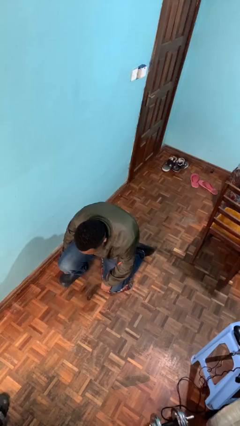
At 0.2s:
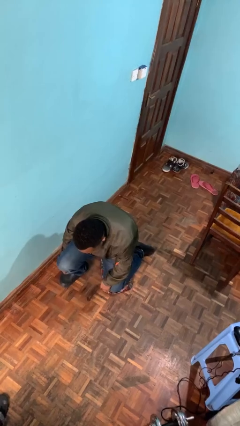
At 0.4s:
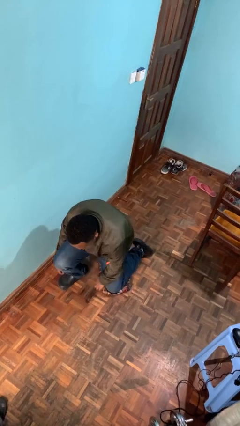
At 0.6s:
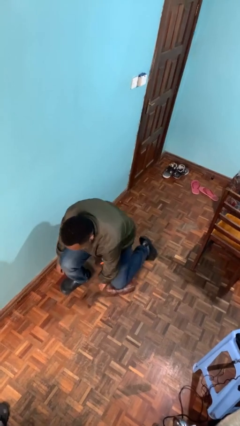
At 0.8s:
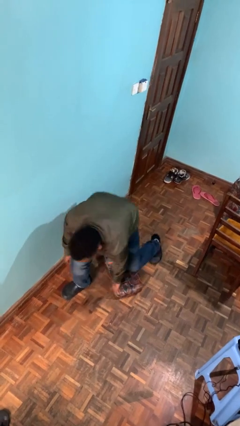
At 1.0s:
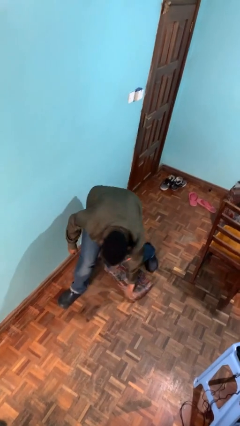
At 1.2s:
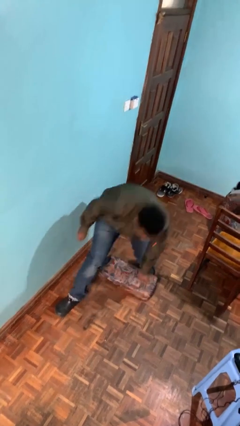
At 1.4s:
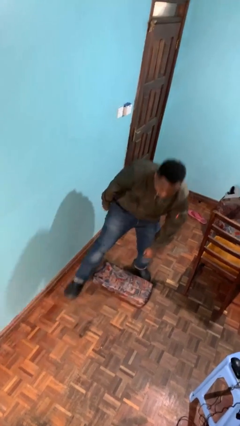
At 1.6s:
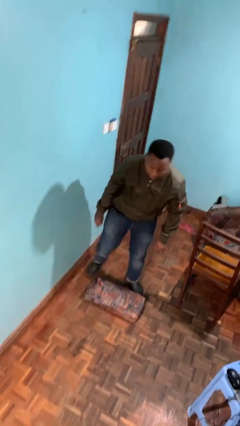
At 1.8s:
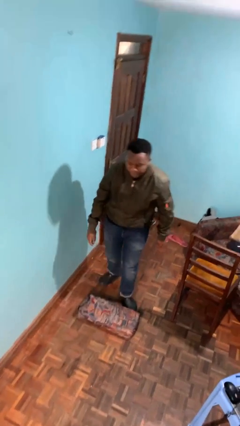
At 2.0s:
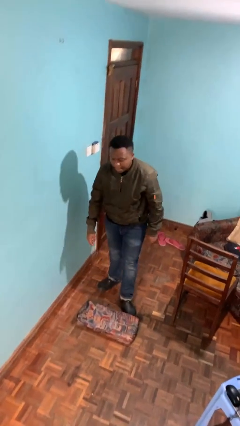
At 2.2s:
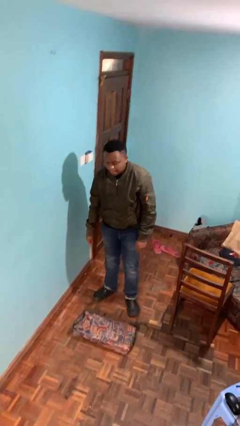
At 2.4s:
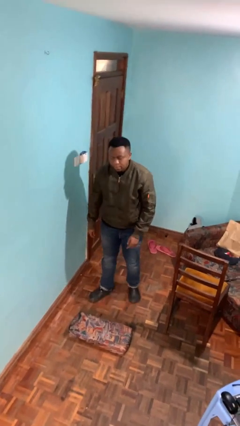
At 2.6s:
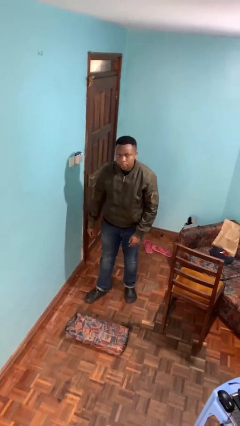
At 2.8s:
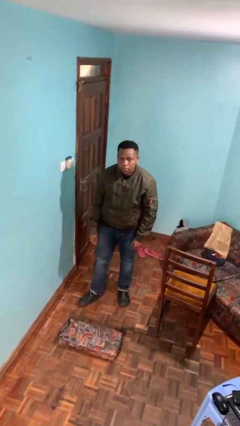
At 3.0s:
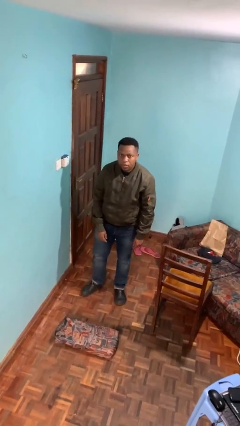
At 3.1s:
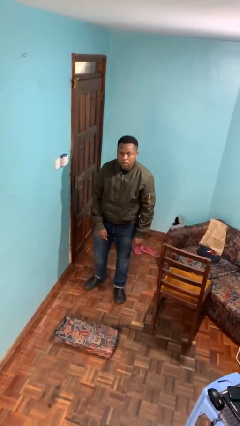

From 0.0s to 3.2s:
person stands up from floor

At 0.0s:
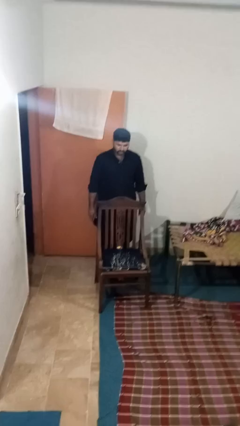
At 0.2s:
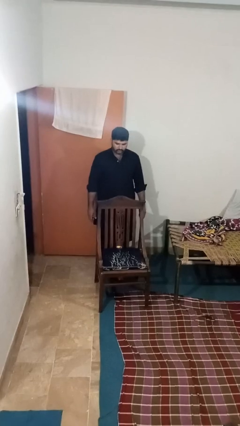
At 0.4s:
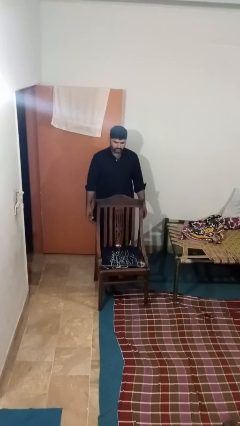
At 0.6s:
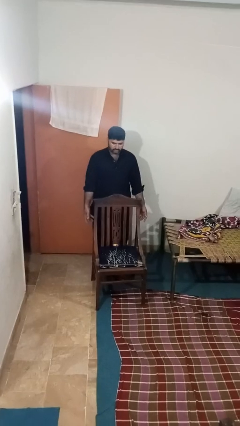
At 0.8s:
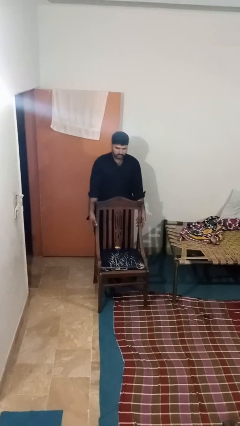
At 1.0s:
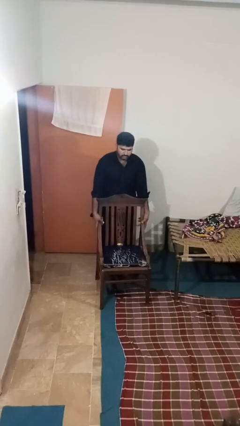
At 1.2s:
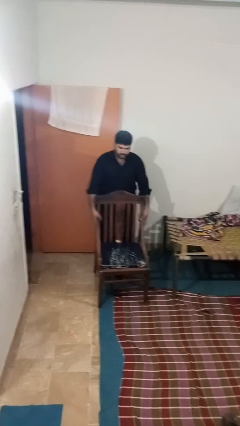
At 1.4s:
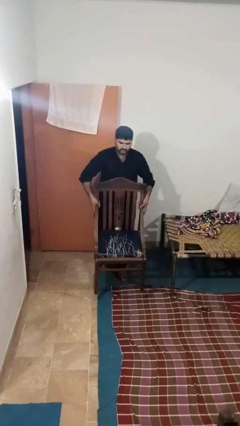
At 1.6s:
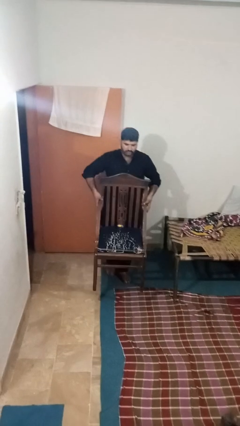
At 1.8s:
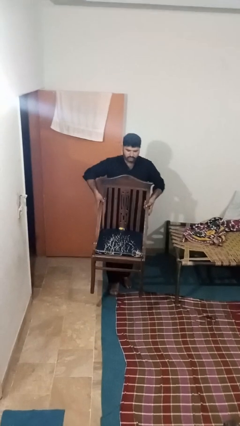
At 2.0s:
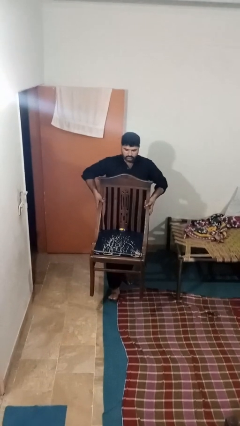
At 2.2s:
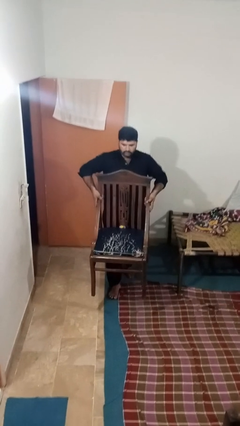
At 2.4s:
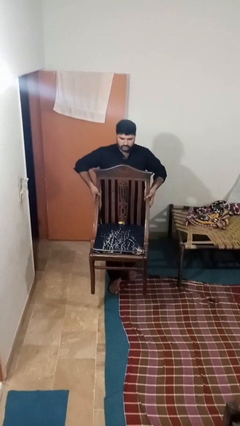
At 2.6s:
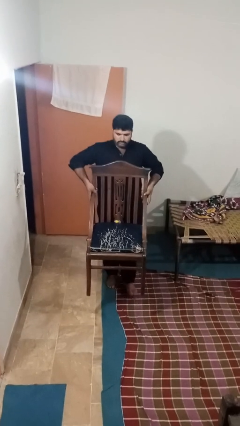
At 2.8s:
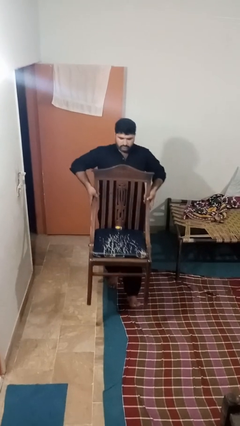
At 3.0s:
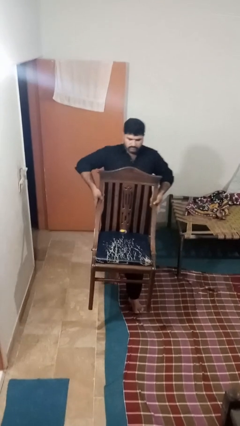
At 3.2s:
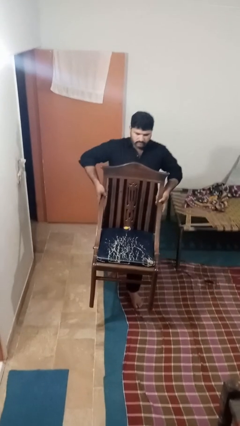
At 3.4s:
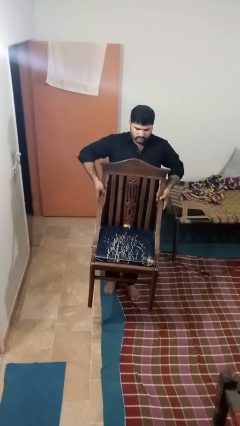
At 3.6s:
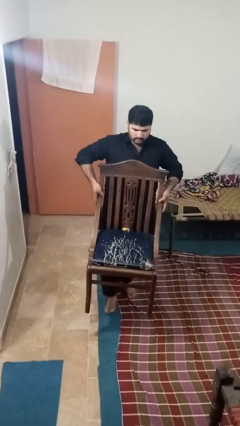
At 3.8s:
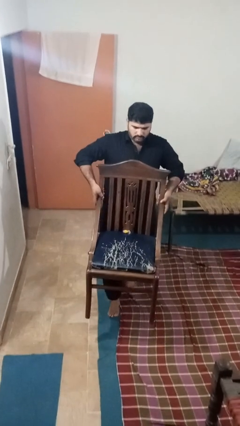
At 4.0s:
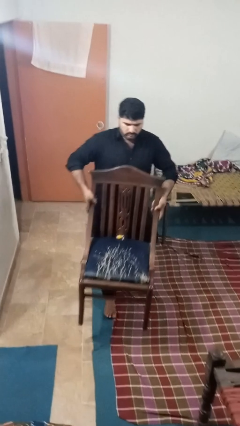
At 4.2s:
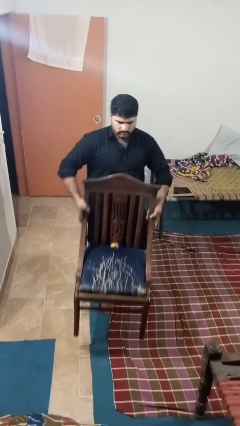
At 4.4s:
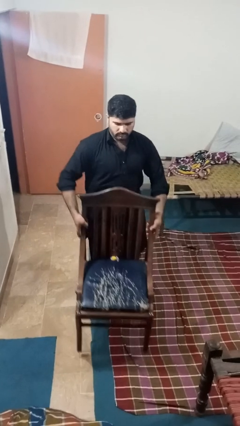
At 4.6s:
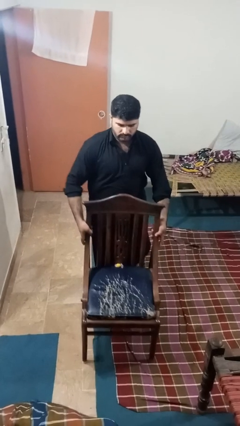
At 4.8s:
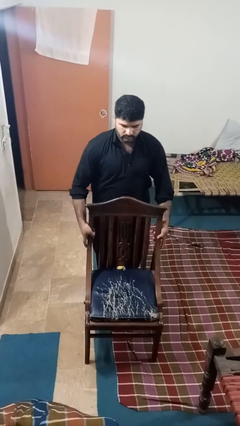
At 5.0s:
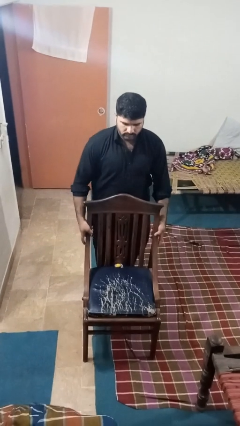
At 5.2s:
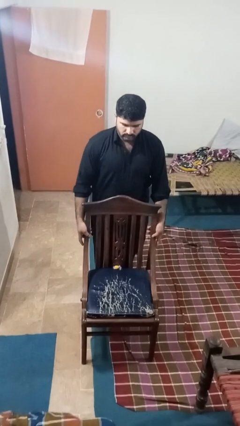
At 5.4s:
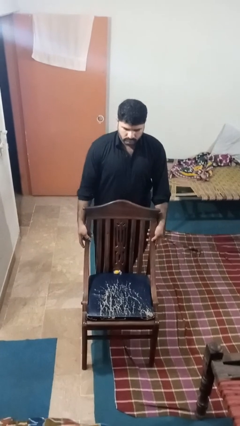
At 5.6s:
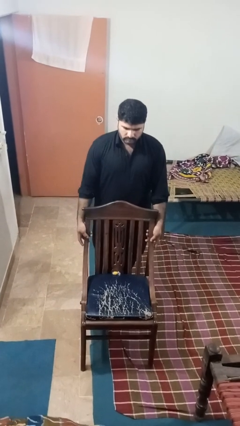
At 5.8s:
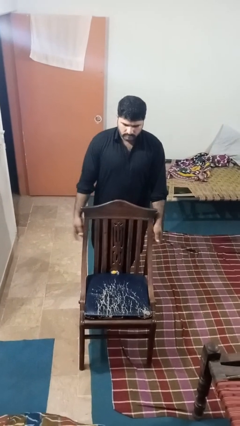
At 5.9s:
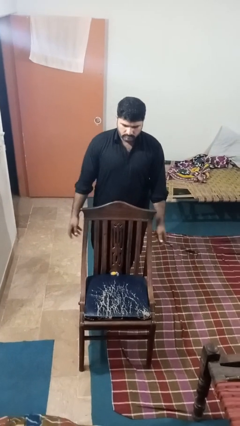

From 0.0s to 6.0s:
person carries furniture

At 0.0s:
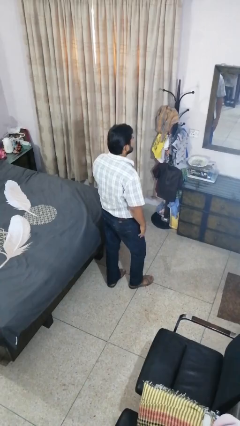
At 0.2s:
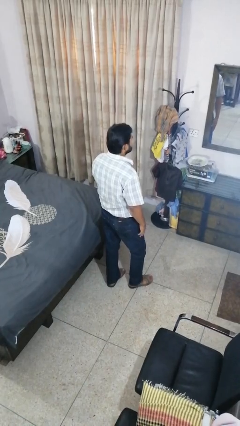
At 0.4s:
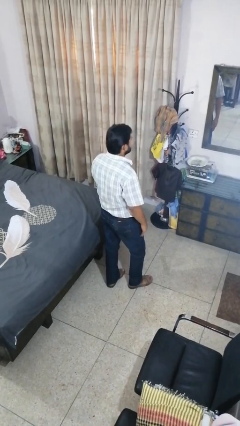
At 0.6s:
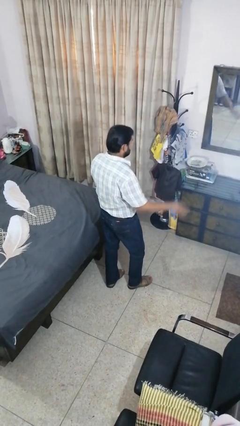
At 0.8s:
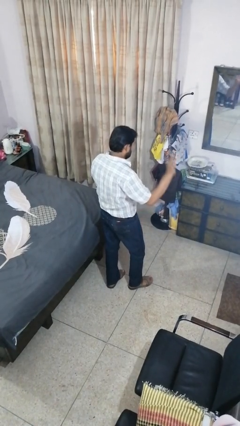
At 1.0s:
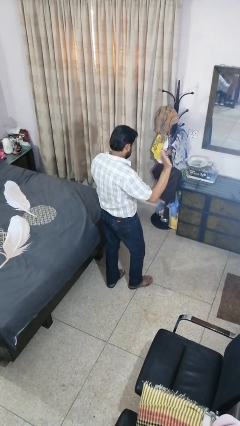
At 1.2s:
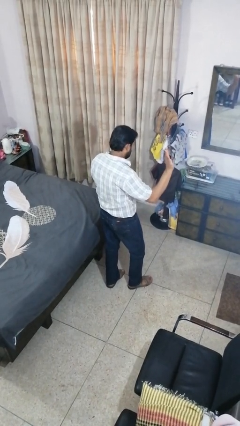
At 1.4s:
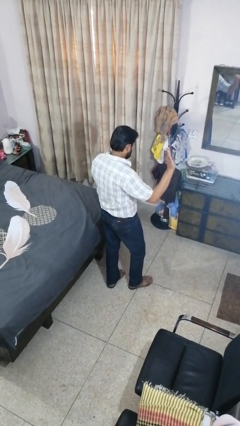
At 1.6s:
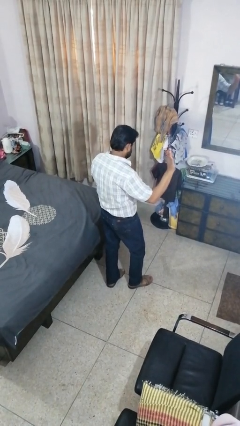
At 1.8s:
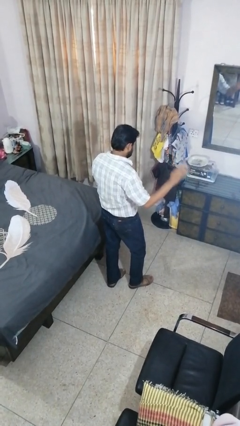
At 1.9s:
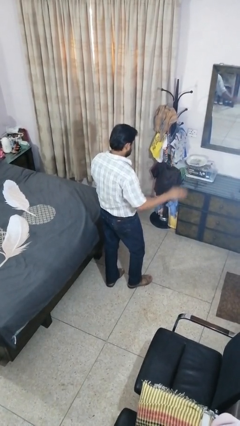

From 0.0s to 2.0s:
person gestures stop

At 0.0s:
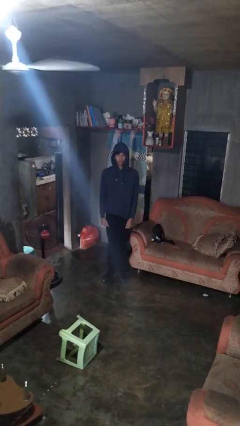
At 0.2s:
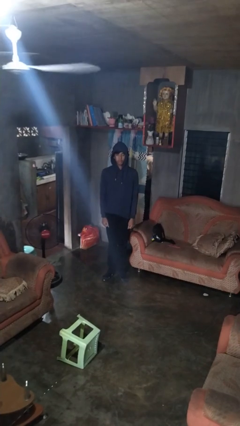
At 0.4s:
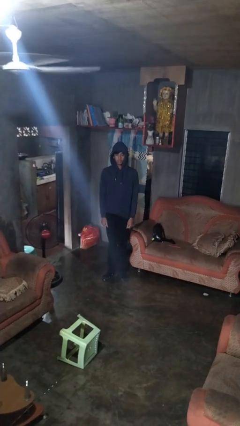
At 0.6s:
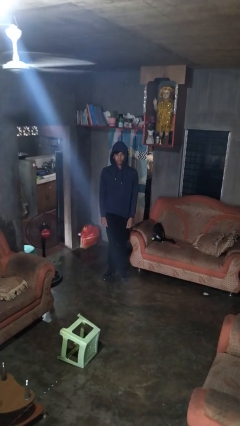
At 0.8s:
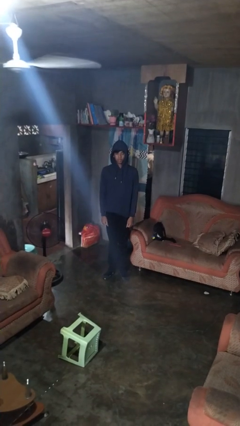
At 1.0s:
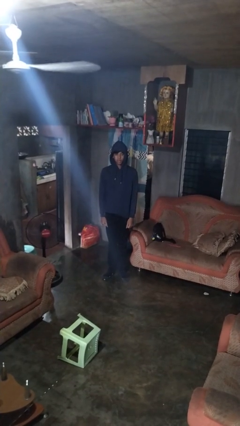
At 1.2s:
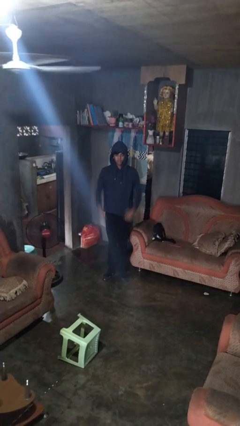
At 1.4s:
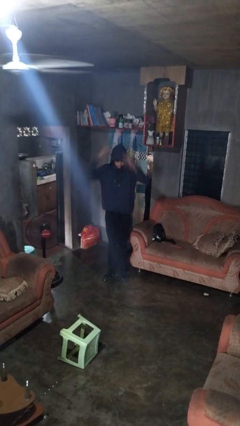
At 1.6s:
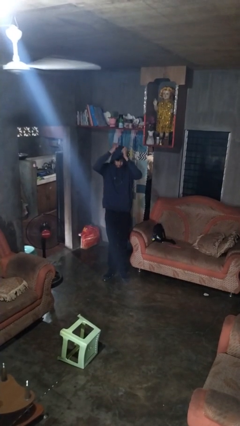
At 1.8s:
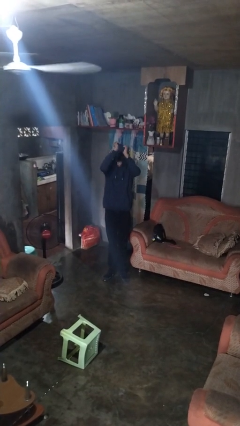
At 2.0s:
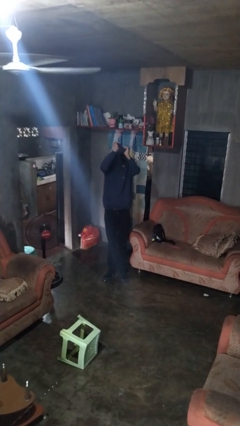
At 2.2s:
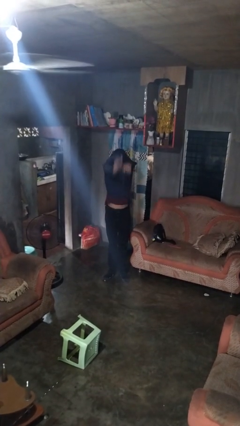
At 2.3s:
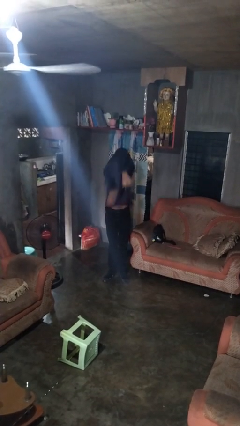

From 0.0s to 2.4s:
person takes off hoodie

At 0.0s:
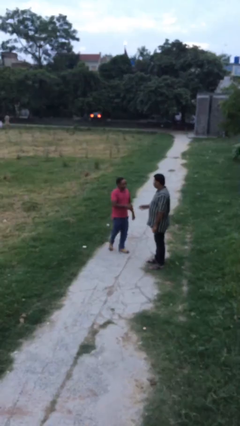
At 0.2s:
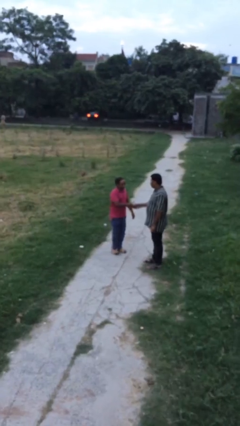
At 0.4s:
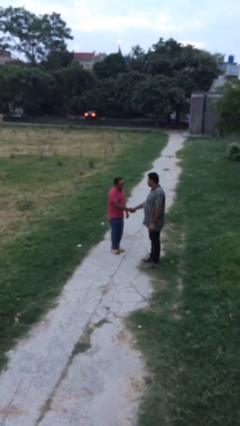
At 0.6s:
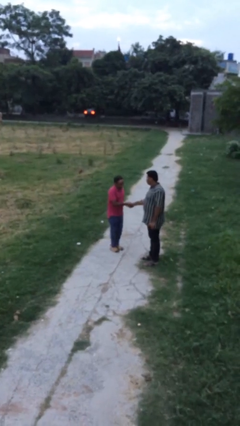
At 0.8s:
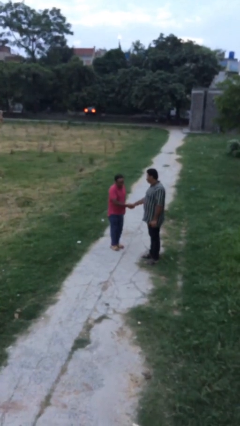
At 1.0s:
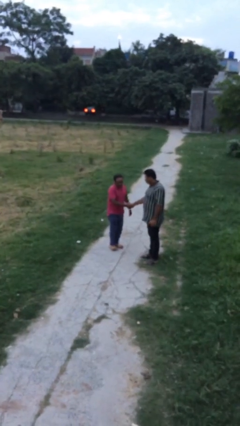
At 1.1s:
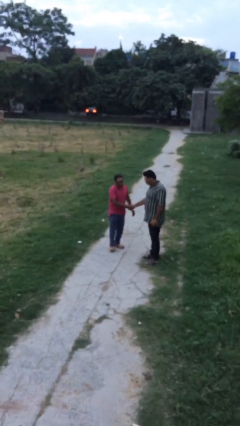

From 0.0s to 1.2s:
person shakes hand

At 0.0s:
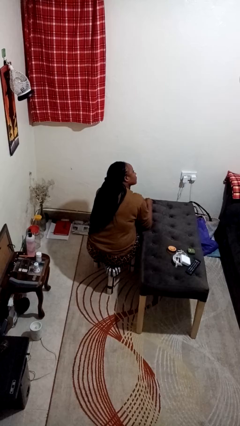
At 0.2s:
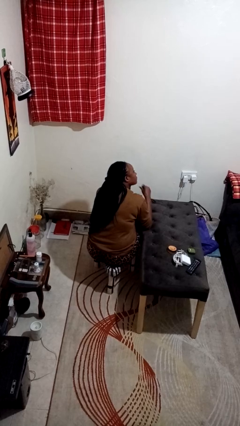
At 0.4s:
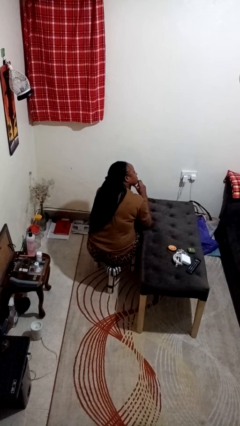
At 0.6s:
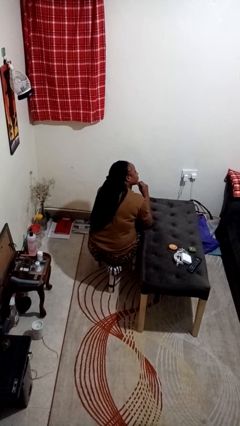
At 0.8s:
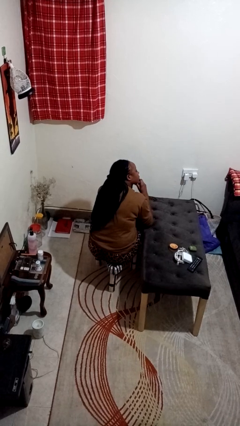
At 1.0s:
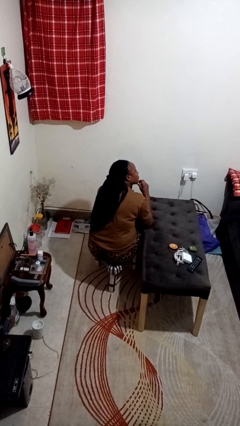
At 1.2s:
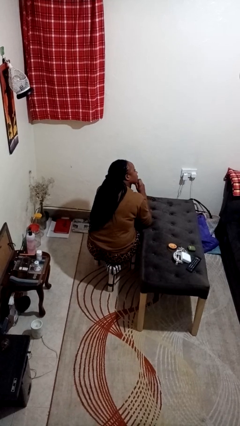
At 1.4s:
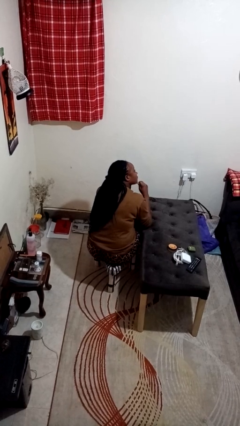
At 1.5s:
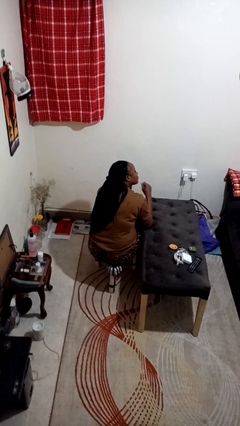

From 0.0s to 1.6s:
person strokes chin

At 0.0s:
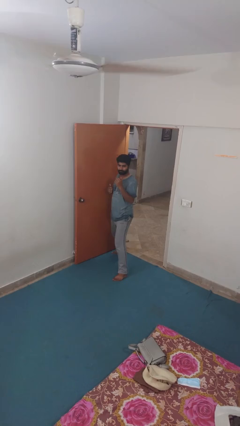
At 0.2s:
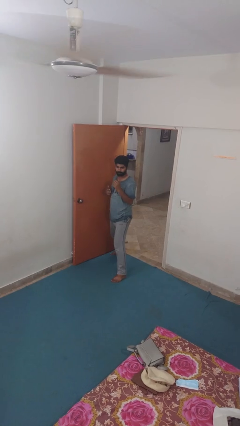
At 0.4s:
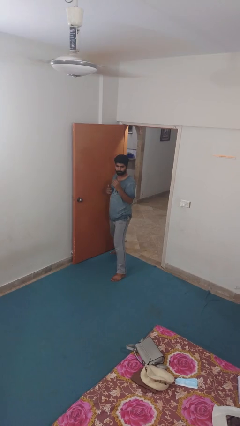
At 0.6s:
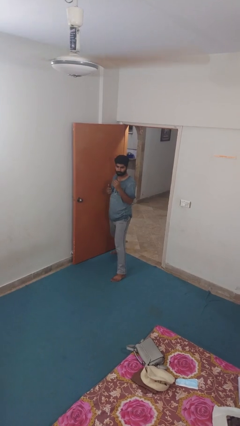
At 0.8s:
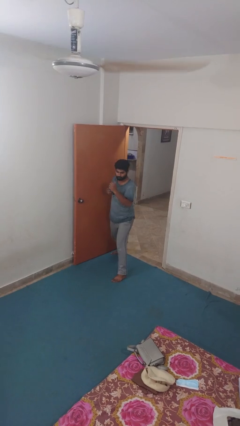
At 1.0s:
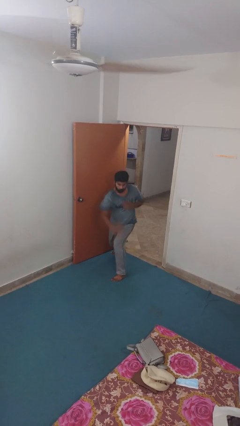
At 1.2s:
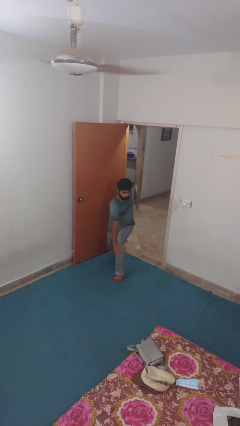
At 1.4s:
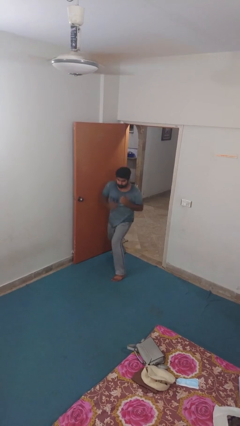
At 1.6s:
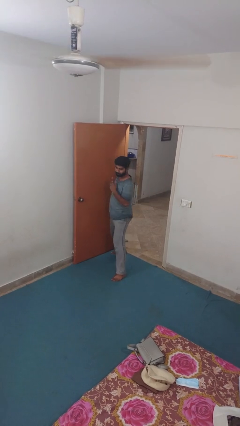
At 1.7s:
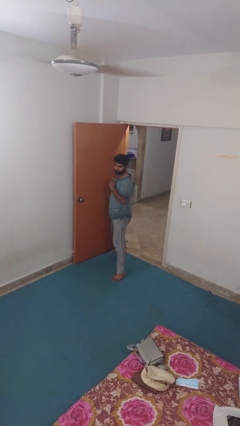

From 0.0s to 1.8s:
person karate chop
